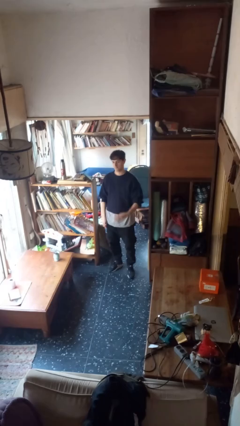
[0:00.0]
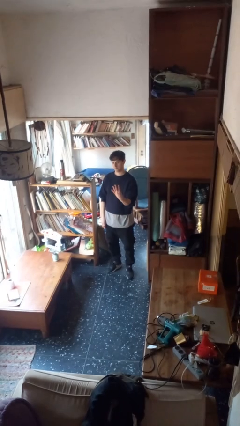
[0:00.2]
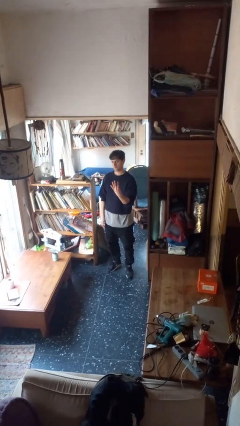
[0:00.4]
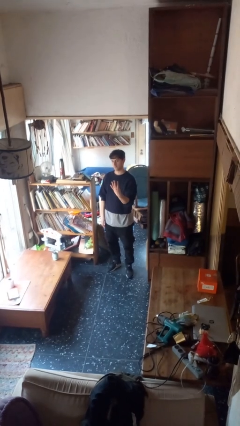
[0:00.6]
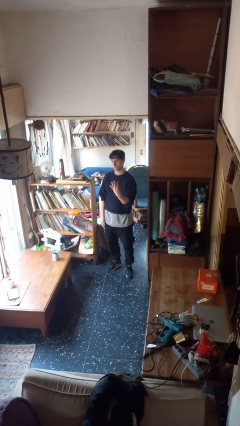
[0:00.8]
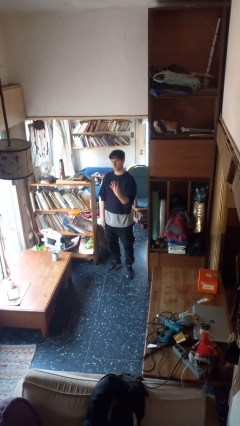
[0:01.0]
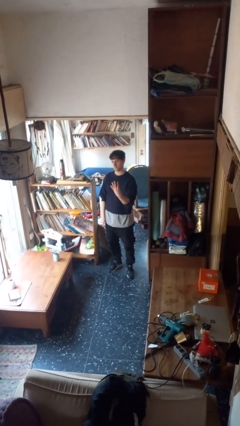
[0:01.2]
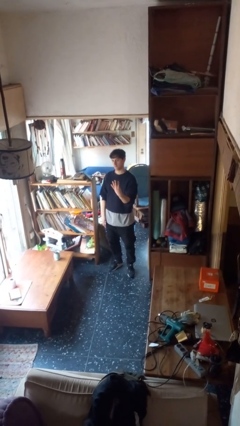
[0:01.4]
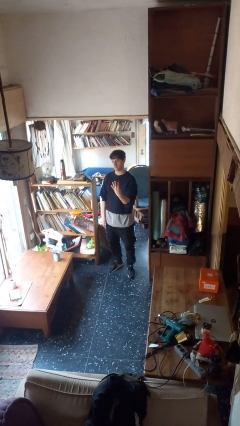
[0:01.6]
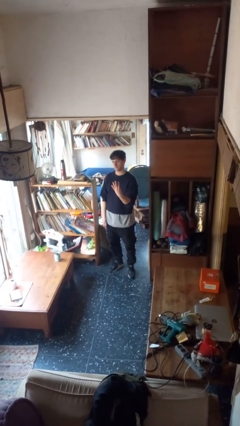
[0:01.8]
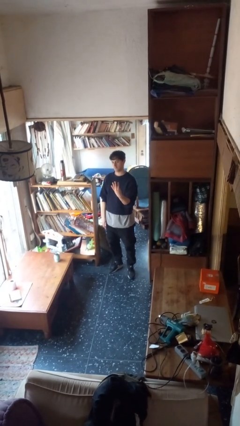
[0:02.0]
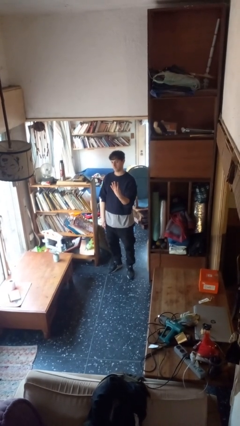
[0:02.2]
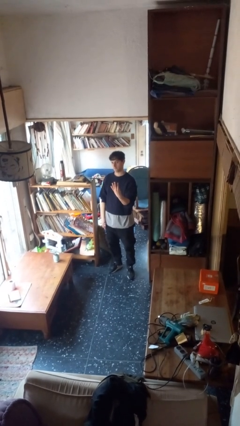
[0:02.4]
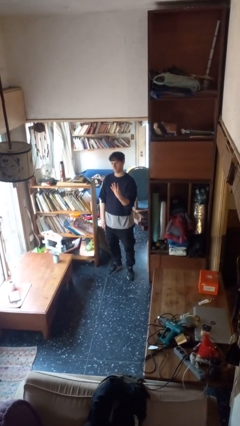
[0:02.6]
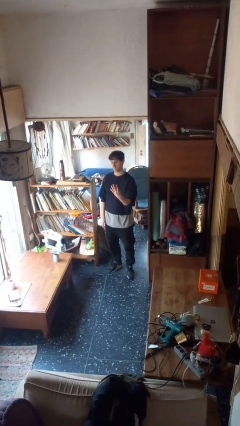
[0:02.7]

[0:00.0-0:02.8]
person gestures number four

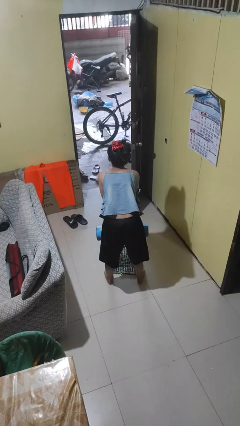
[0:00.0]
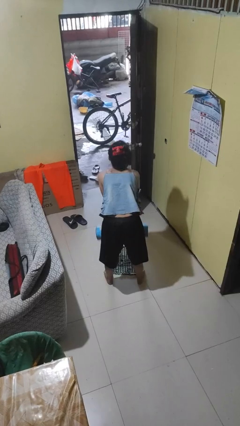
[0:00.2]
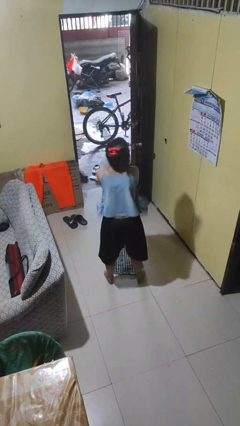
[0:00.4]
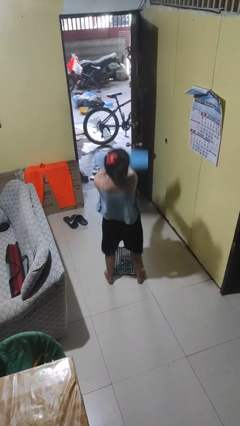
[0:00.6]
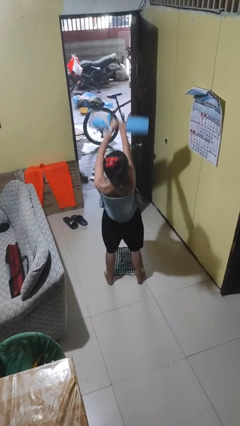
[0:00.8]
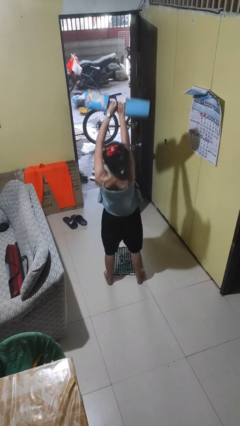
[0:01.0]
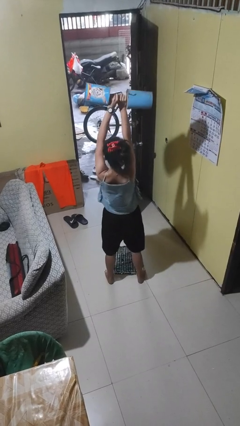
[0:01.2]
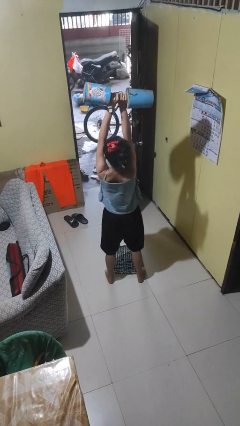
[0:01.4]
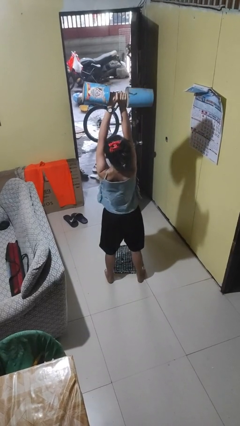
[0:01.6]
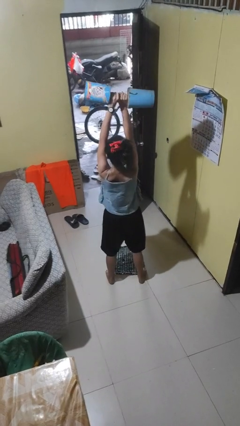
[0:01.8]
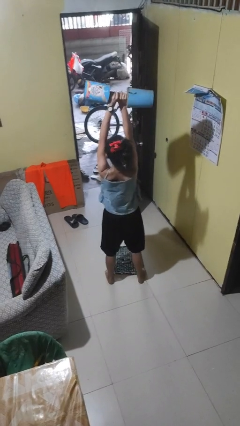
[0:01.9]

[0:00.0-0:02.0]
person lifts dumbbells

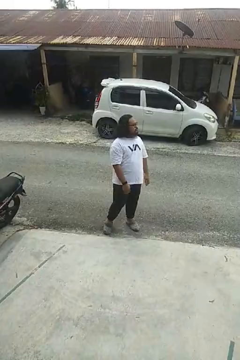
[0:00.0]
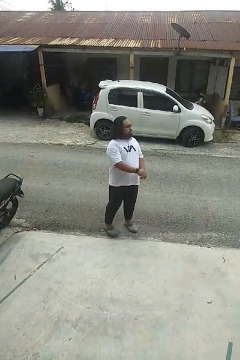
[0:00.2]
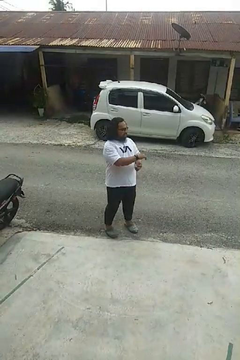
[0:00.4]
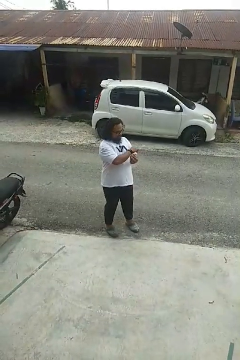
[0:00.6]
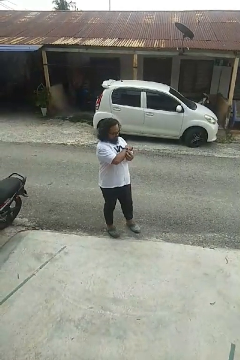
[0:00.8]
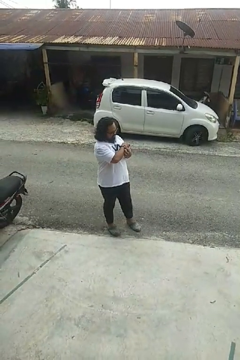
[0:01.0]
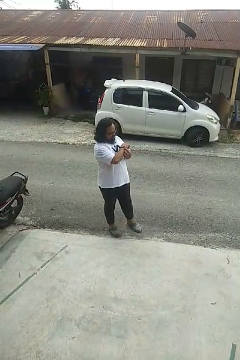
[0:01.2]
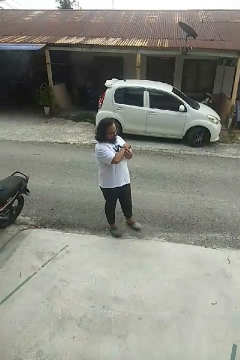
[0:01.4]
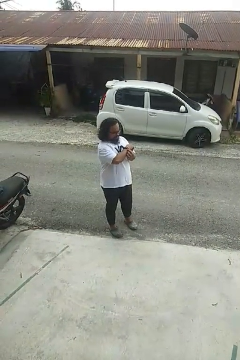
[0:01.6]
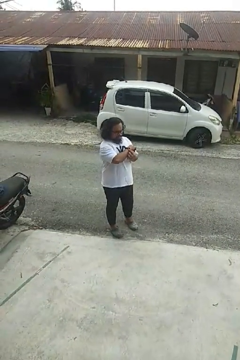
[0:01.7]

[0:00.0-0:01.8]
person looks at wristwatch

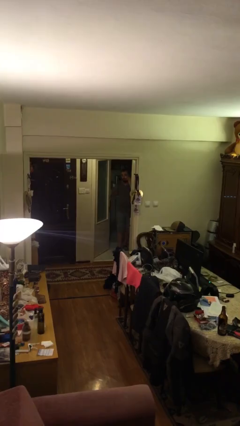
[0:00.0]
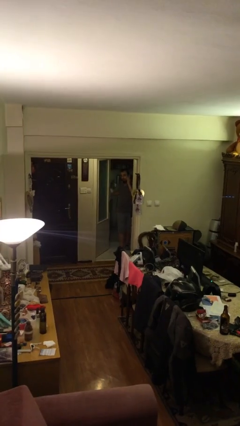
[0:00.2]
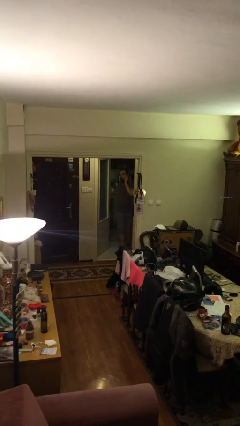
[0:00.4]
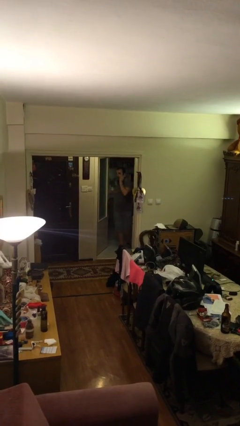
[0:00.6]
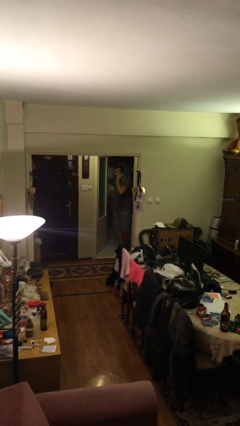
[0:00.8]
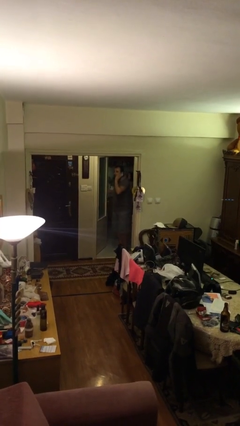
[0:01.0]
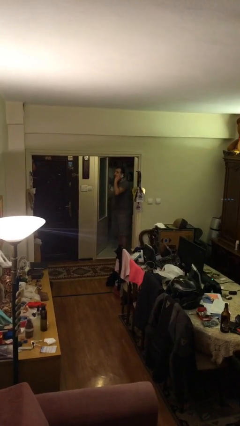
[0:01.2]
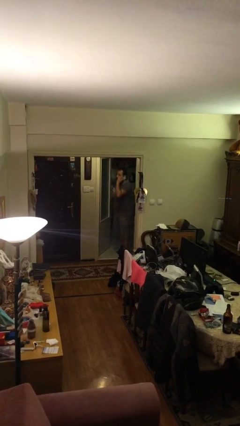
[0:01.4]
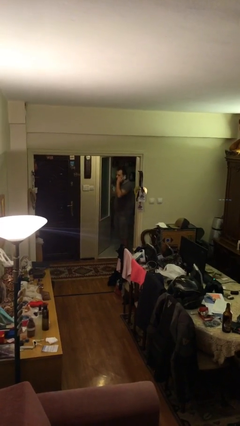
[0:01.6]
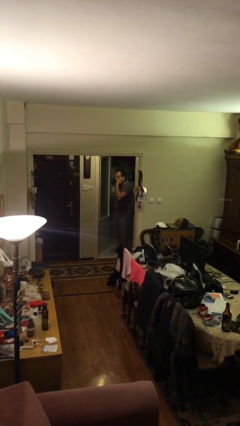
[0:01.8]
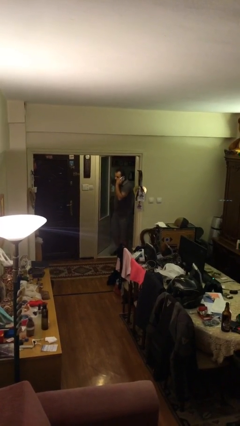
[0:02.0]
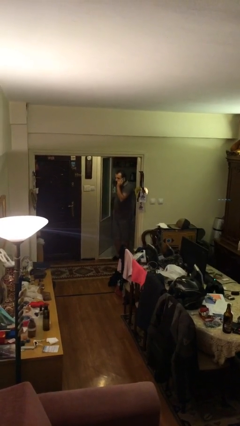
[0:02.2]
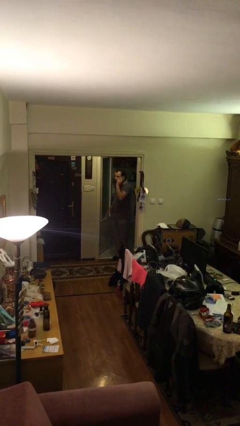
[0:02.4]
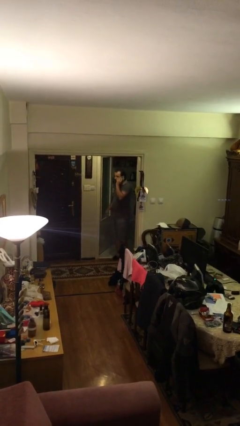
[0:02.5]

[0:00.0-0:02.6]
person enters scene through structure

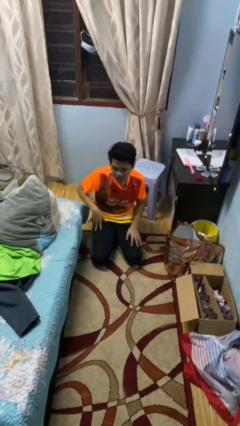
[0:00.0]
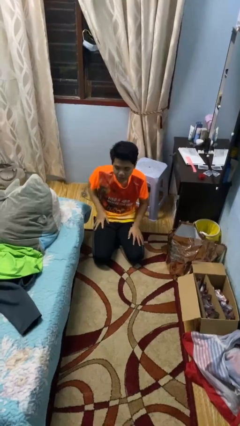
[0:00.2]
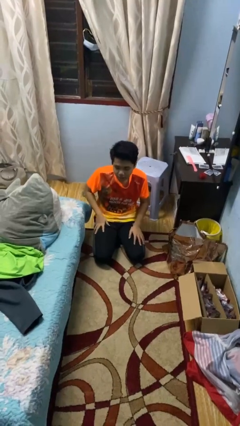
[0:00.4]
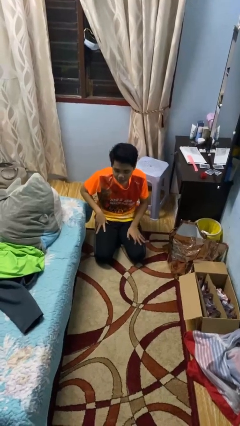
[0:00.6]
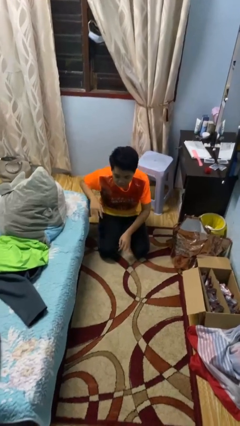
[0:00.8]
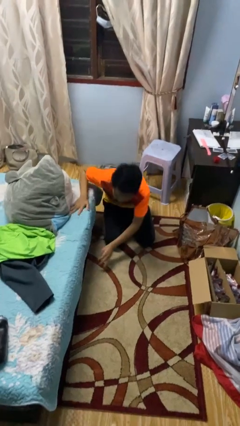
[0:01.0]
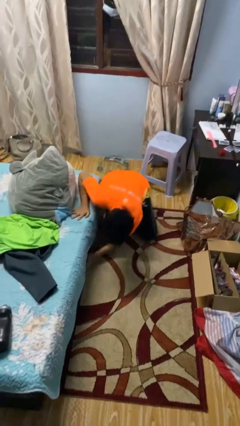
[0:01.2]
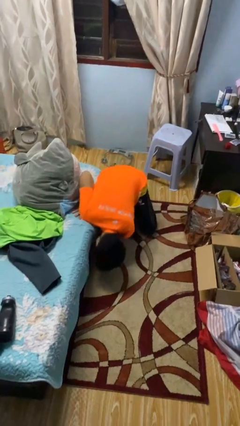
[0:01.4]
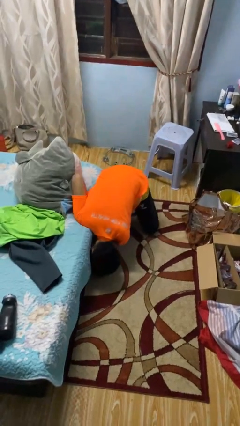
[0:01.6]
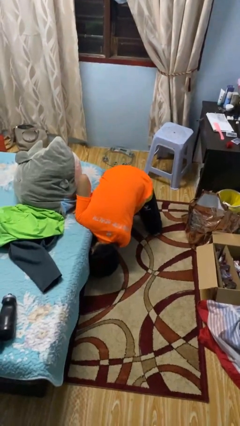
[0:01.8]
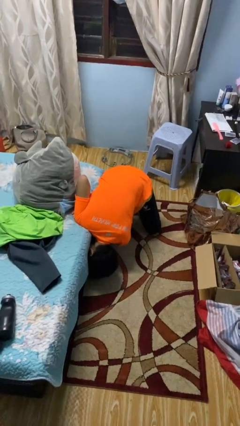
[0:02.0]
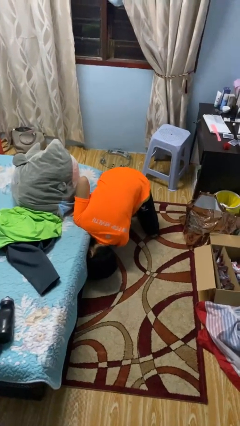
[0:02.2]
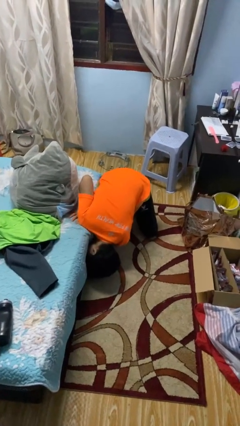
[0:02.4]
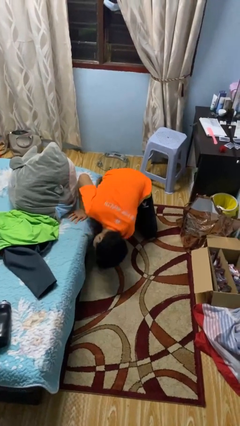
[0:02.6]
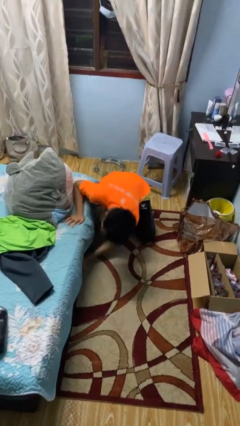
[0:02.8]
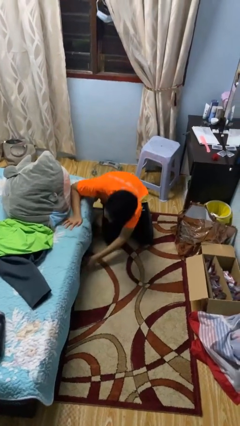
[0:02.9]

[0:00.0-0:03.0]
person searches under bed

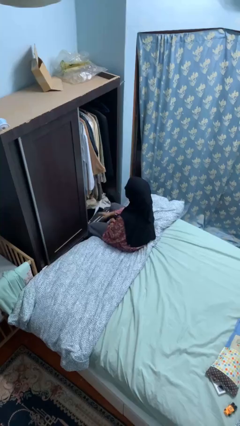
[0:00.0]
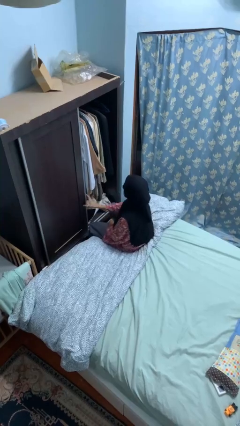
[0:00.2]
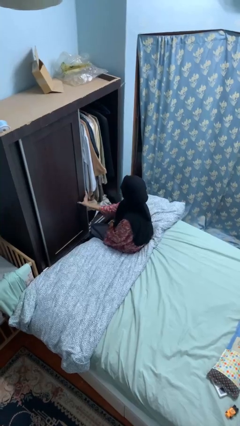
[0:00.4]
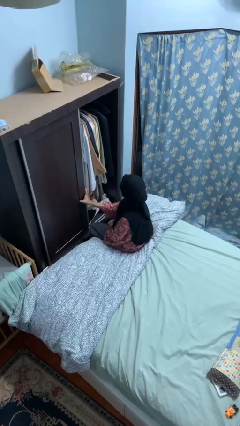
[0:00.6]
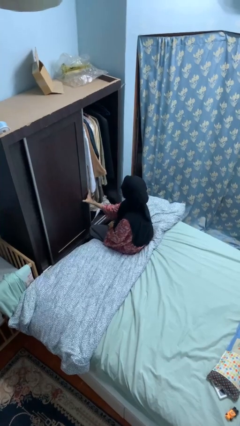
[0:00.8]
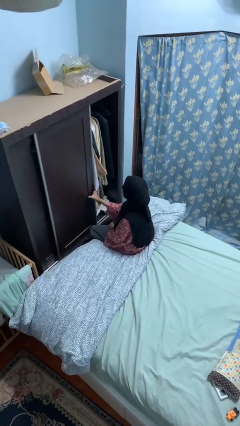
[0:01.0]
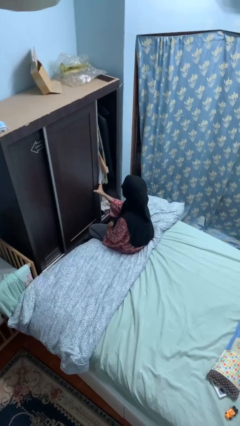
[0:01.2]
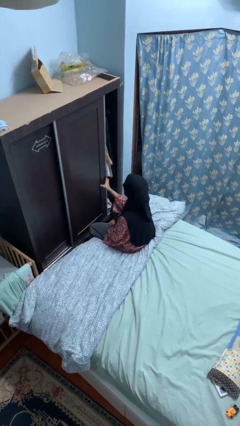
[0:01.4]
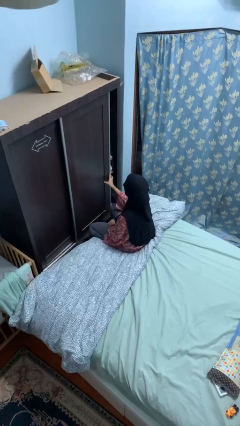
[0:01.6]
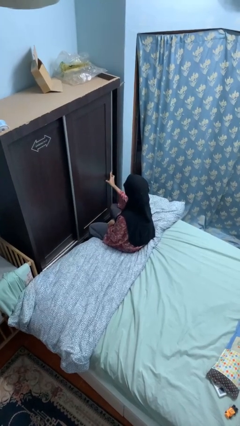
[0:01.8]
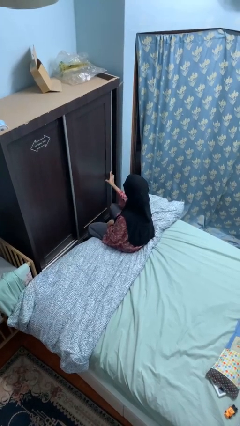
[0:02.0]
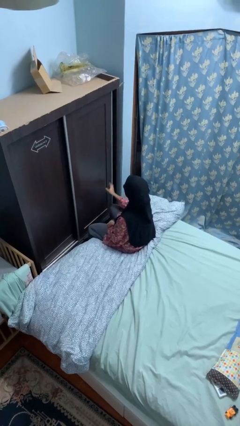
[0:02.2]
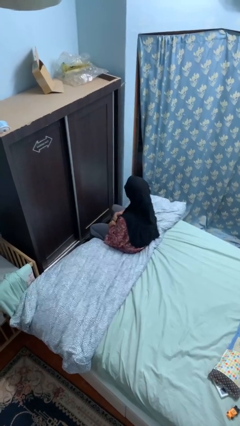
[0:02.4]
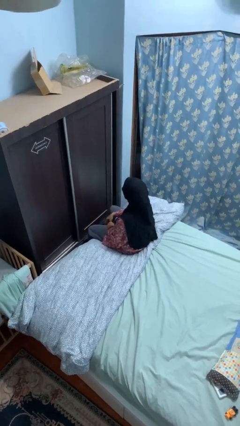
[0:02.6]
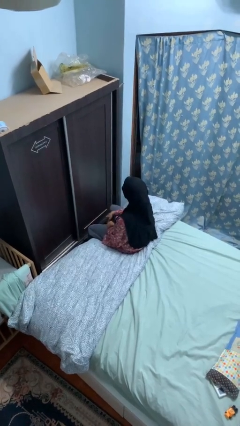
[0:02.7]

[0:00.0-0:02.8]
person closes closet door

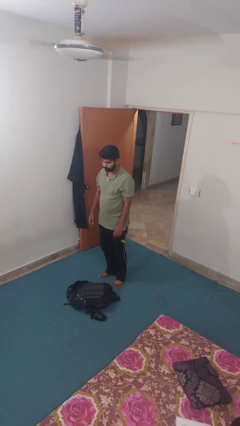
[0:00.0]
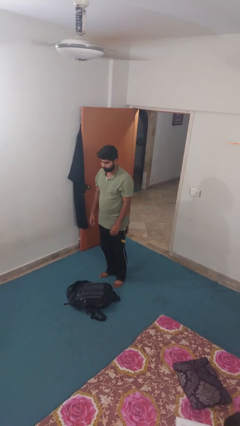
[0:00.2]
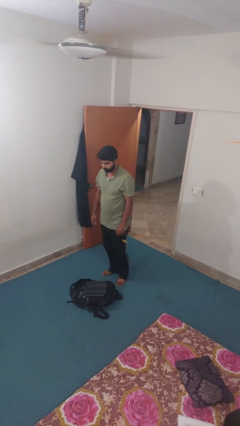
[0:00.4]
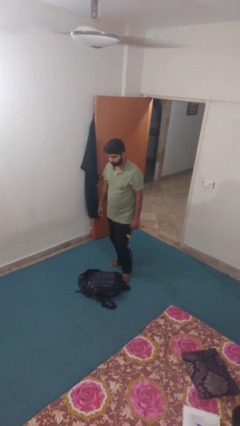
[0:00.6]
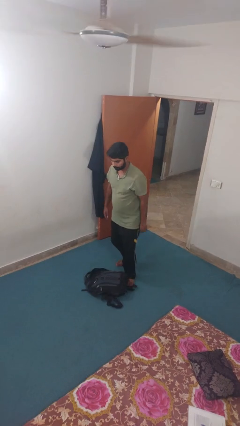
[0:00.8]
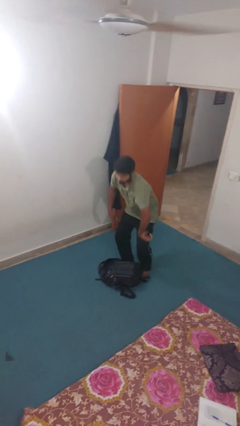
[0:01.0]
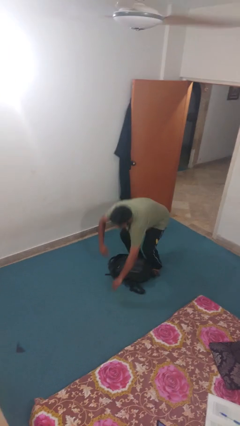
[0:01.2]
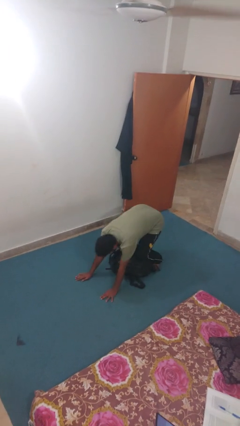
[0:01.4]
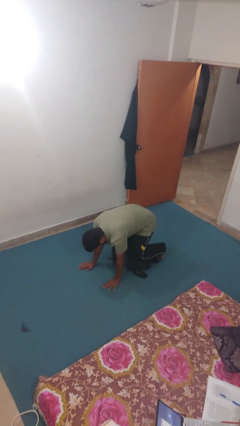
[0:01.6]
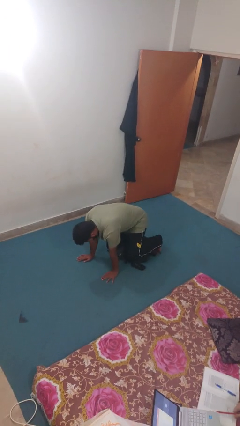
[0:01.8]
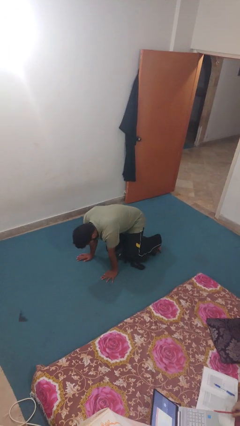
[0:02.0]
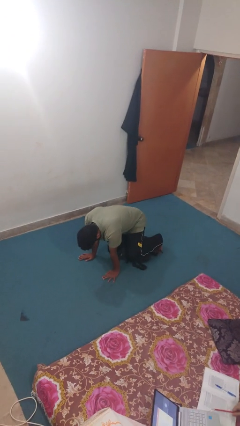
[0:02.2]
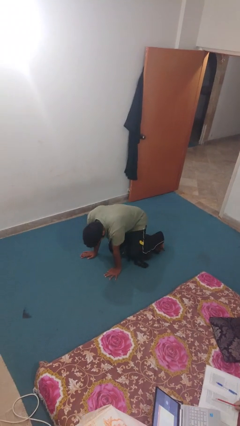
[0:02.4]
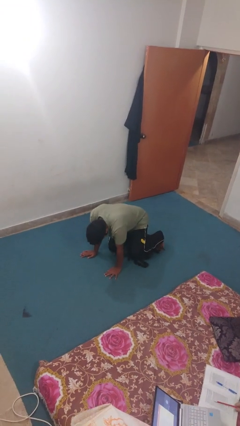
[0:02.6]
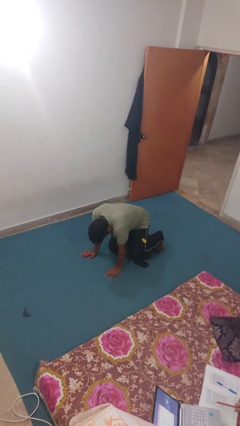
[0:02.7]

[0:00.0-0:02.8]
person trips on object on floor
